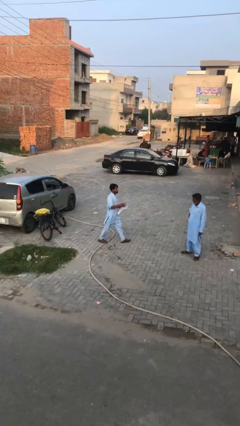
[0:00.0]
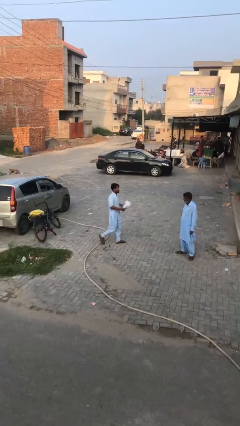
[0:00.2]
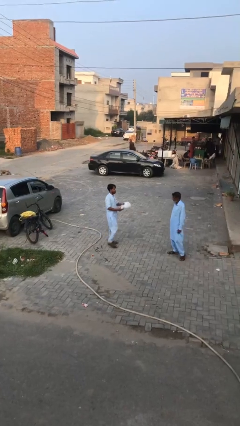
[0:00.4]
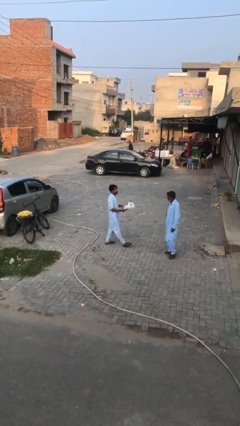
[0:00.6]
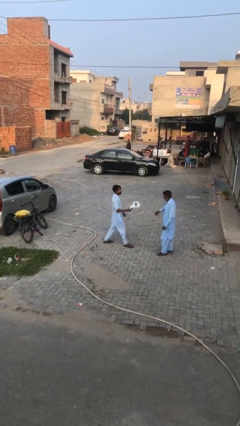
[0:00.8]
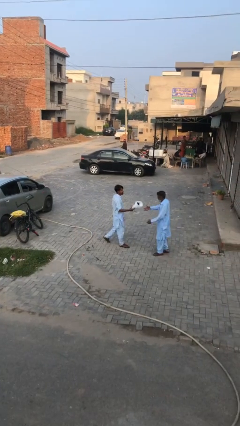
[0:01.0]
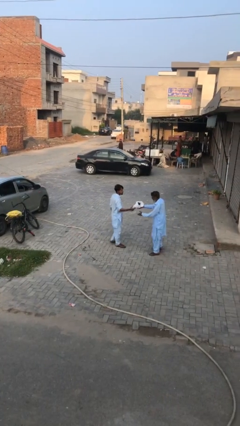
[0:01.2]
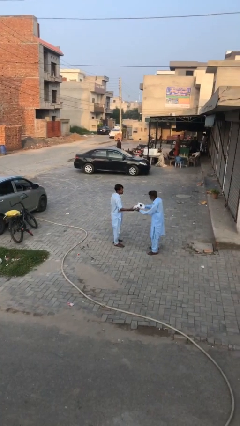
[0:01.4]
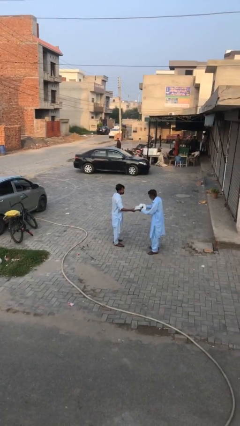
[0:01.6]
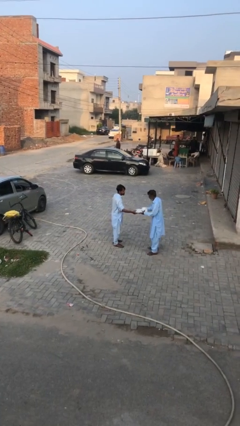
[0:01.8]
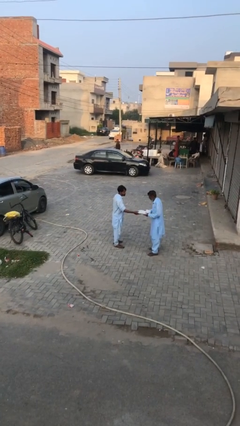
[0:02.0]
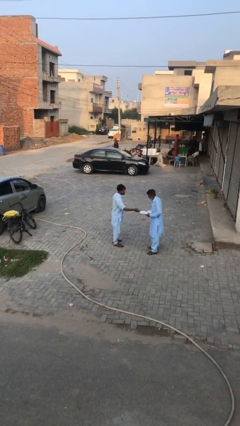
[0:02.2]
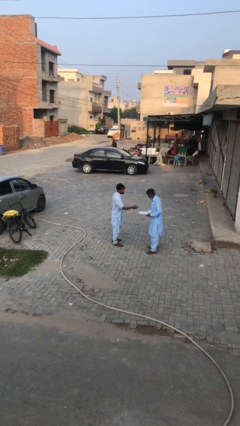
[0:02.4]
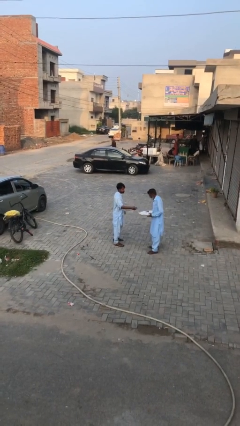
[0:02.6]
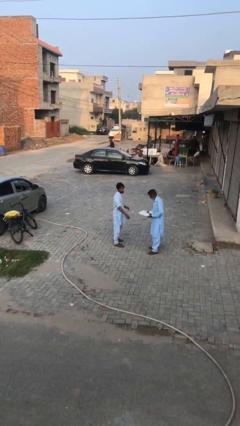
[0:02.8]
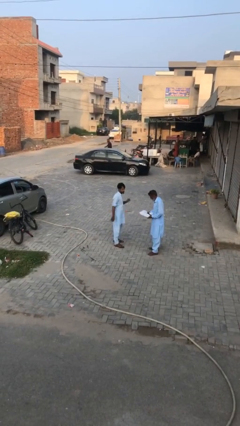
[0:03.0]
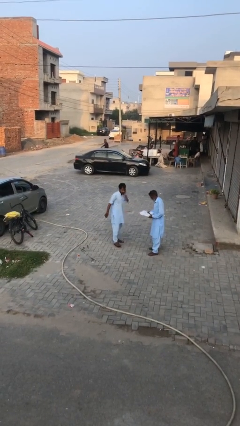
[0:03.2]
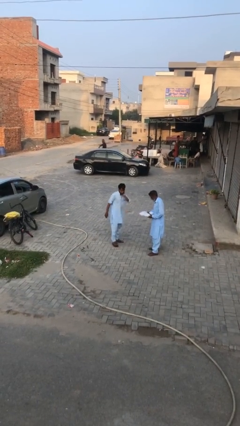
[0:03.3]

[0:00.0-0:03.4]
person transfers object to person

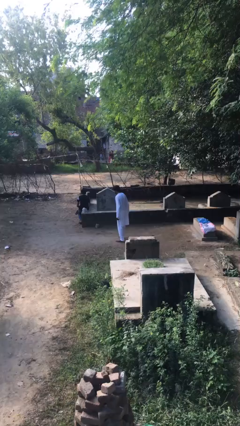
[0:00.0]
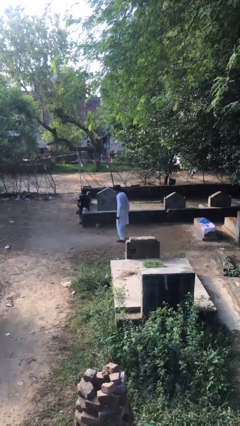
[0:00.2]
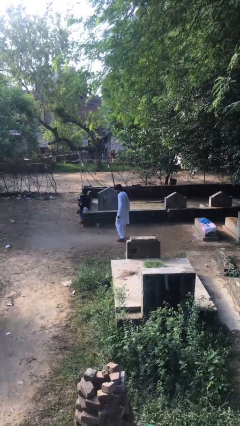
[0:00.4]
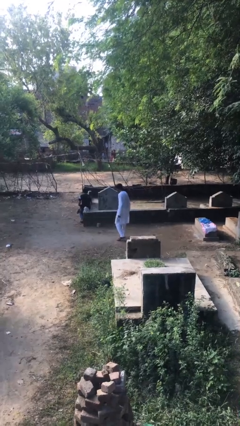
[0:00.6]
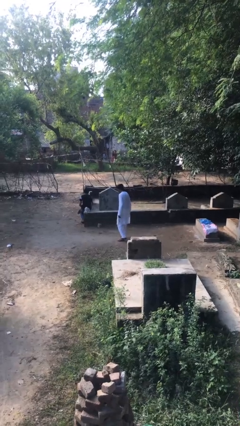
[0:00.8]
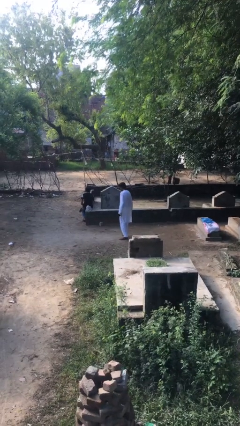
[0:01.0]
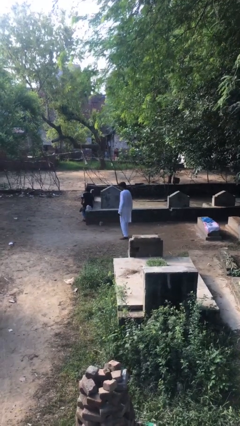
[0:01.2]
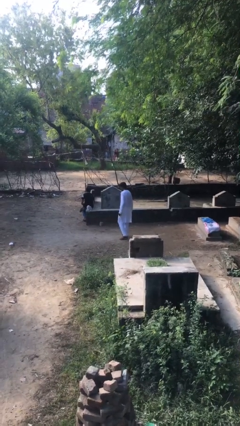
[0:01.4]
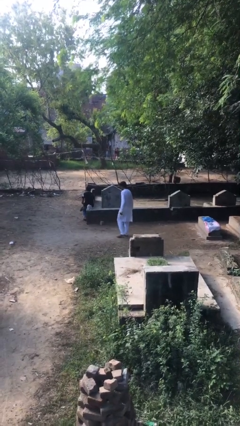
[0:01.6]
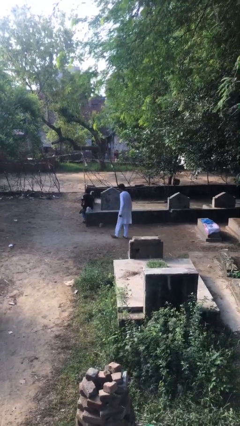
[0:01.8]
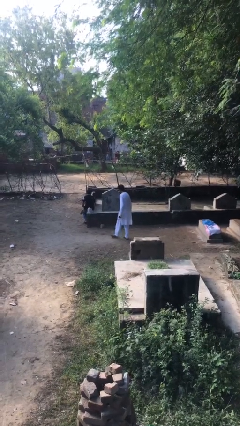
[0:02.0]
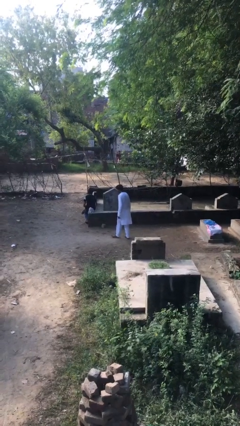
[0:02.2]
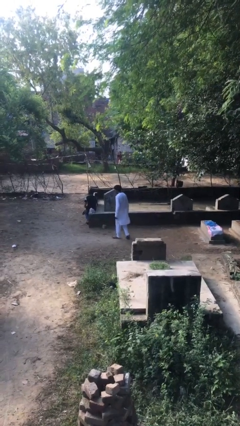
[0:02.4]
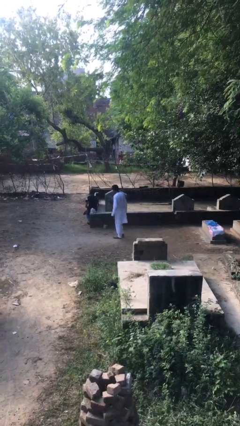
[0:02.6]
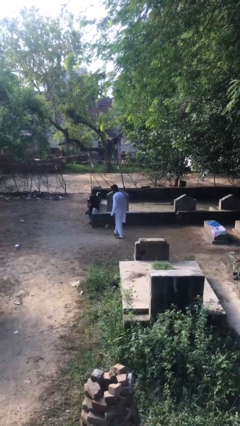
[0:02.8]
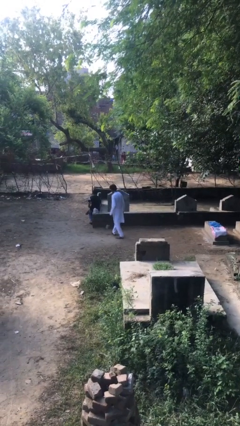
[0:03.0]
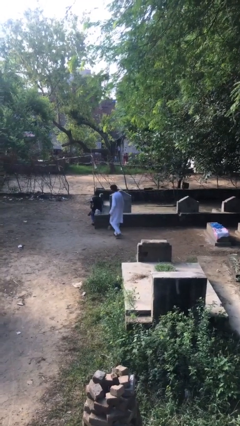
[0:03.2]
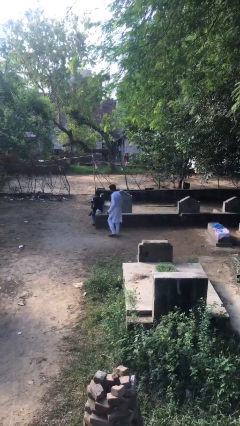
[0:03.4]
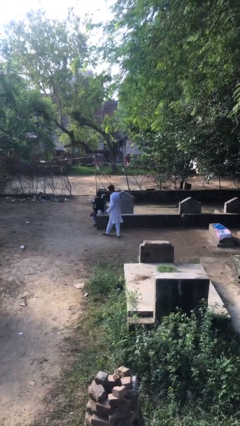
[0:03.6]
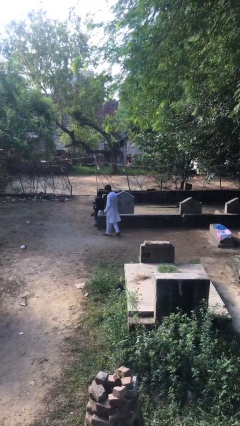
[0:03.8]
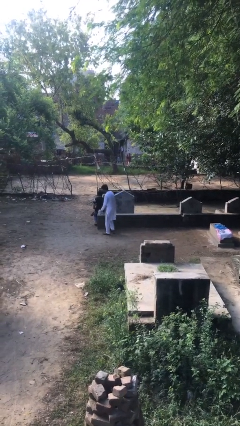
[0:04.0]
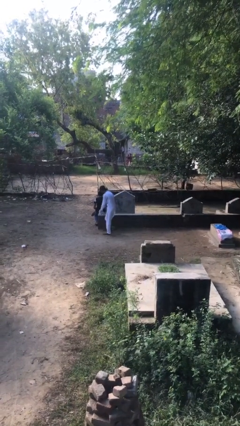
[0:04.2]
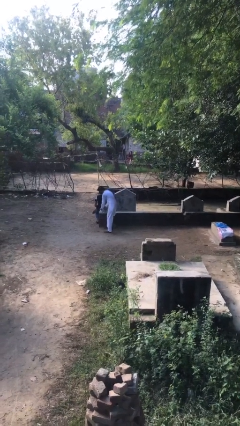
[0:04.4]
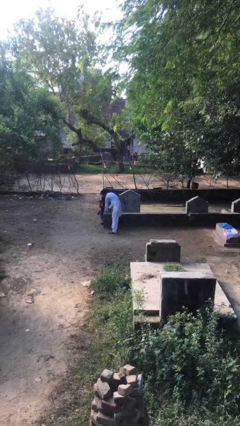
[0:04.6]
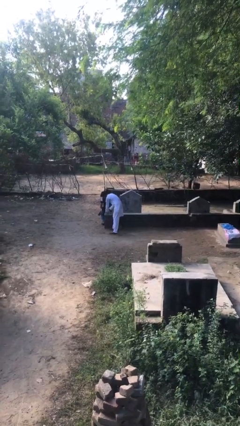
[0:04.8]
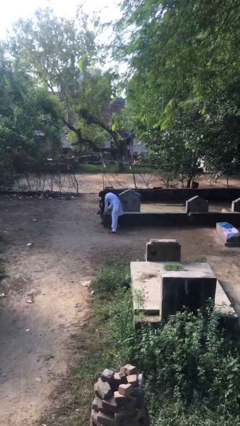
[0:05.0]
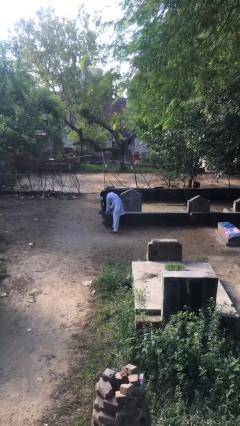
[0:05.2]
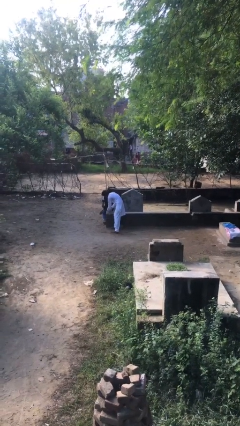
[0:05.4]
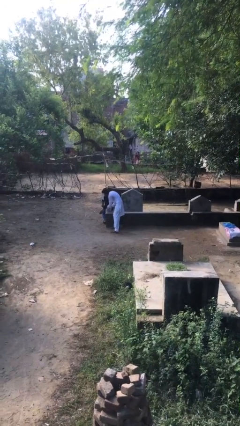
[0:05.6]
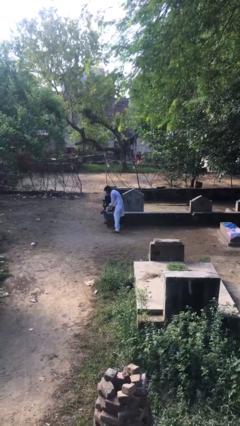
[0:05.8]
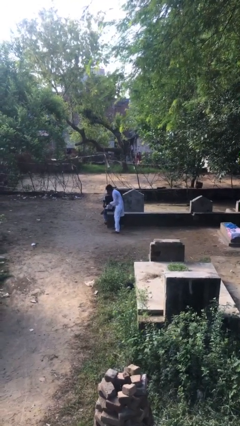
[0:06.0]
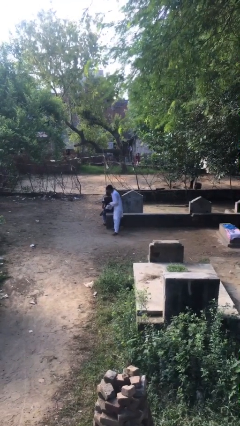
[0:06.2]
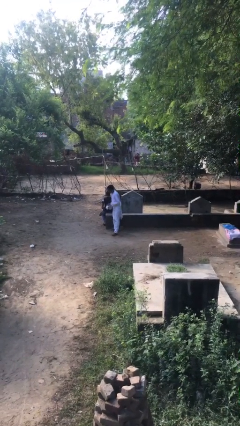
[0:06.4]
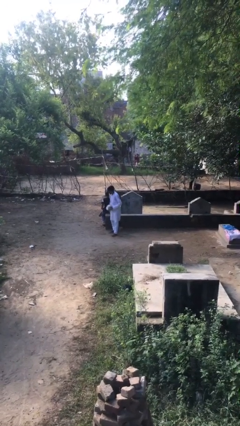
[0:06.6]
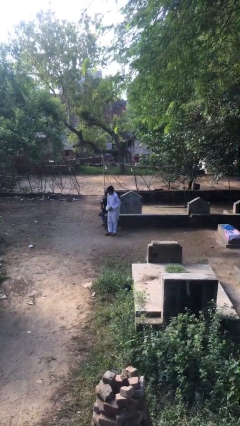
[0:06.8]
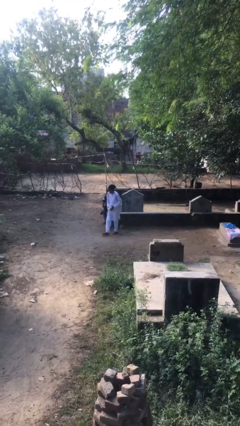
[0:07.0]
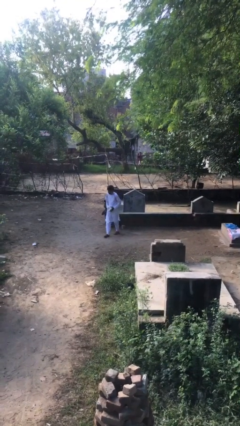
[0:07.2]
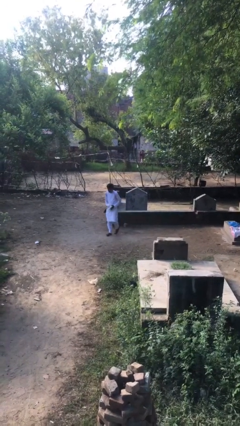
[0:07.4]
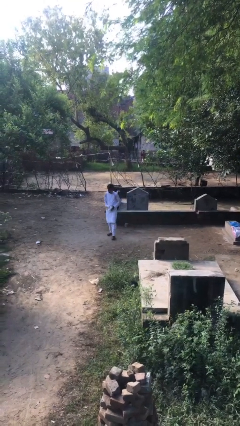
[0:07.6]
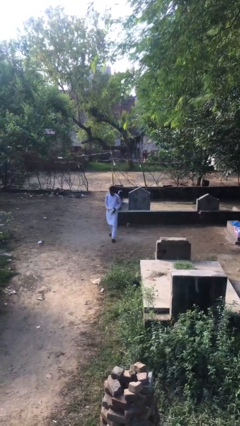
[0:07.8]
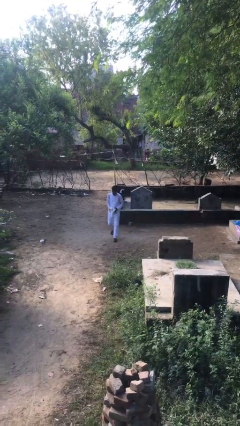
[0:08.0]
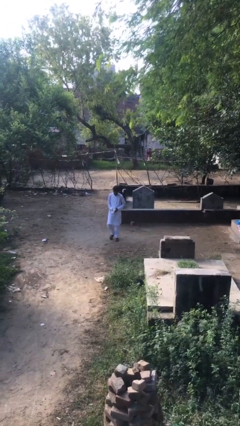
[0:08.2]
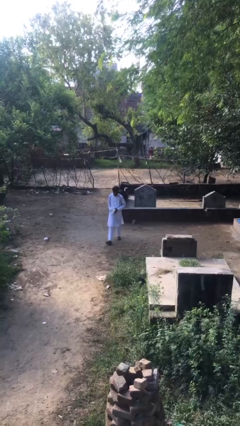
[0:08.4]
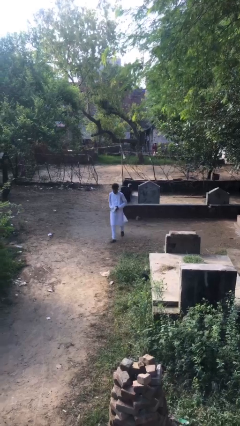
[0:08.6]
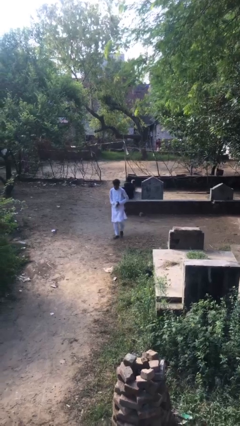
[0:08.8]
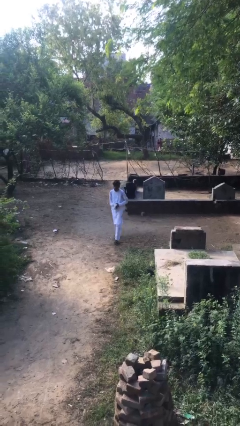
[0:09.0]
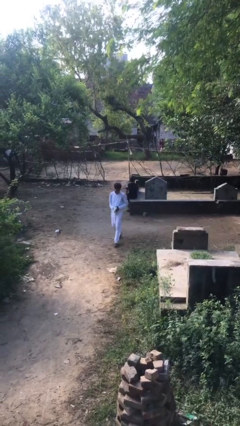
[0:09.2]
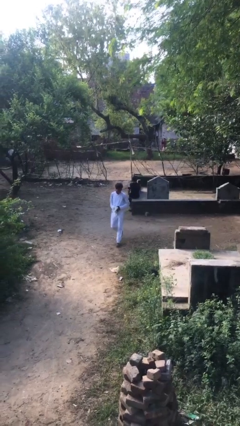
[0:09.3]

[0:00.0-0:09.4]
person steals object from person

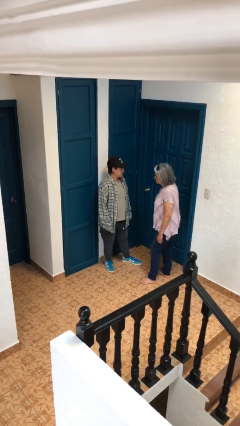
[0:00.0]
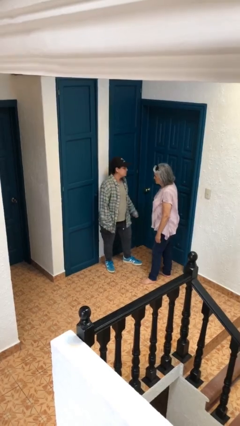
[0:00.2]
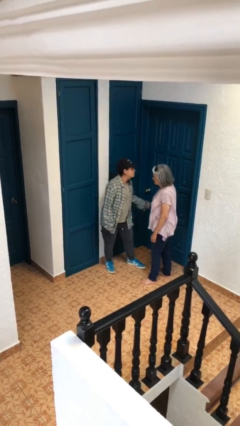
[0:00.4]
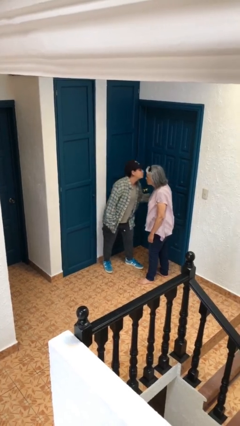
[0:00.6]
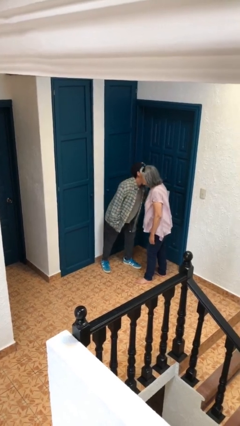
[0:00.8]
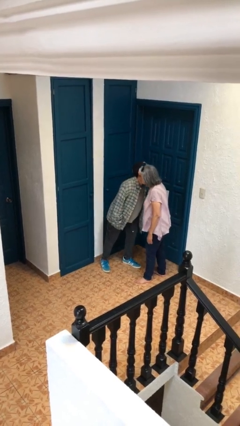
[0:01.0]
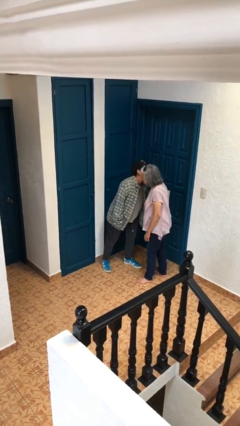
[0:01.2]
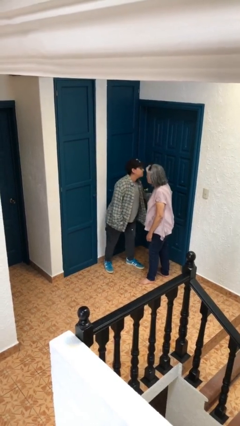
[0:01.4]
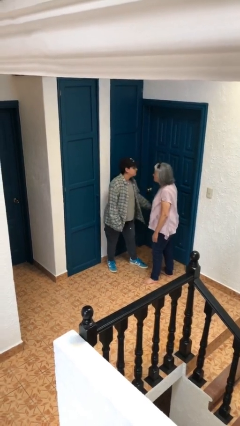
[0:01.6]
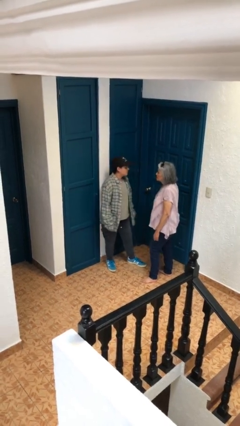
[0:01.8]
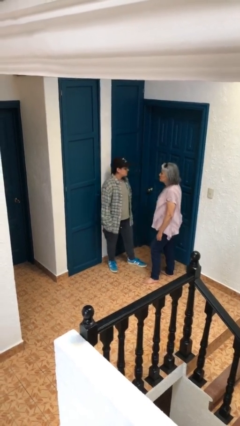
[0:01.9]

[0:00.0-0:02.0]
person kisses cheek of person

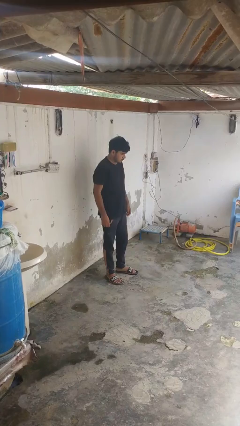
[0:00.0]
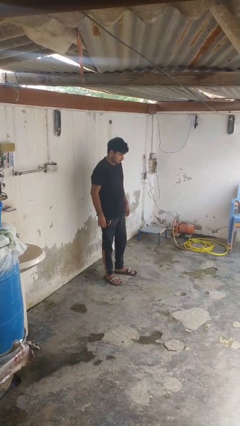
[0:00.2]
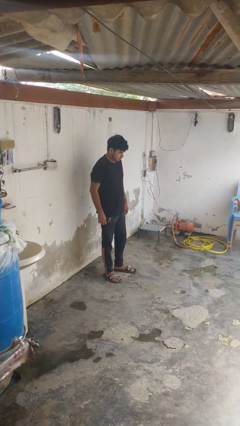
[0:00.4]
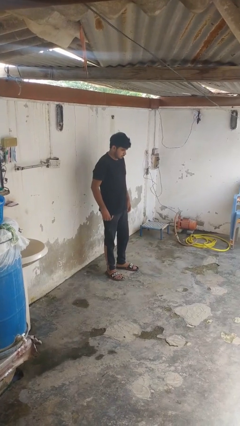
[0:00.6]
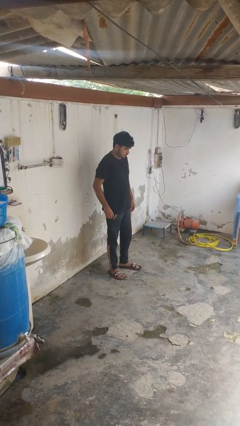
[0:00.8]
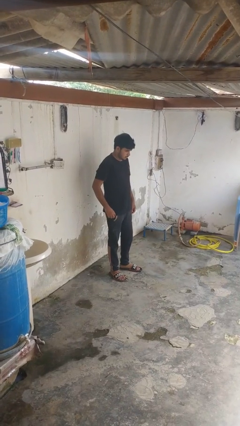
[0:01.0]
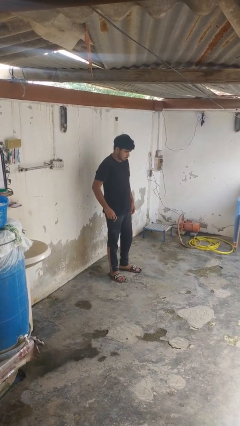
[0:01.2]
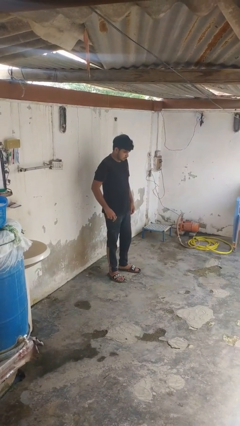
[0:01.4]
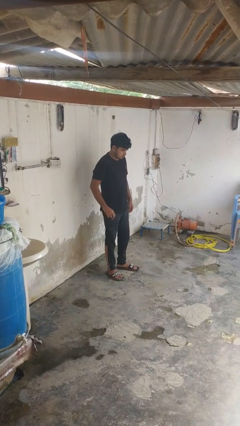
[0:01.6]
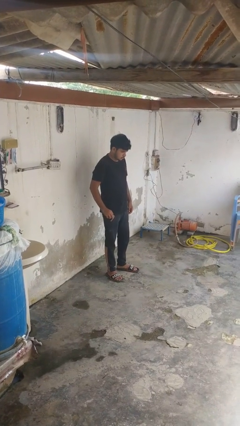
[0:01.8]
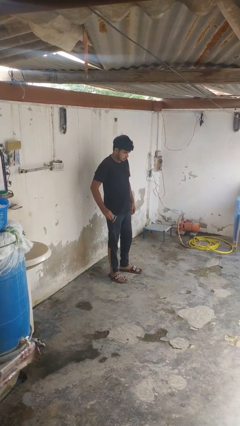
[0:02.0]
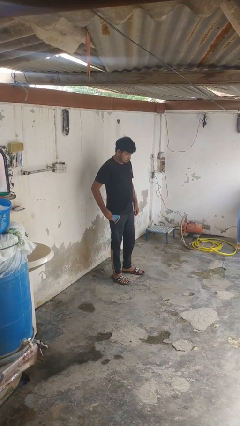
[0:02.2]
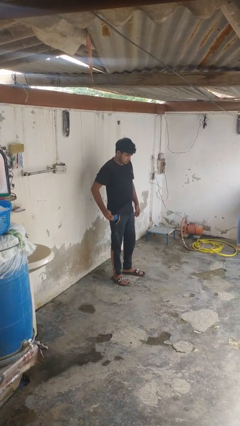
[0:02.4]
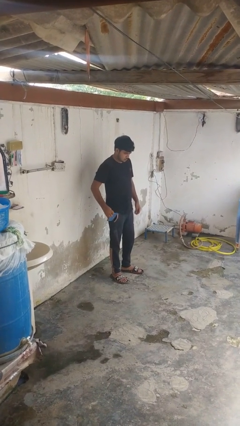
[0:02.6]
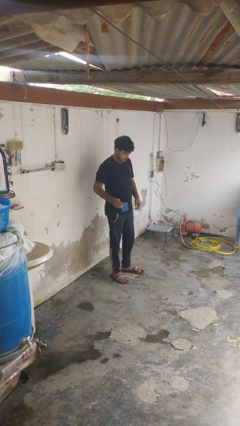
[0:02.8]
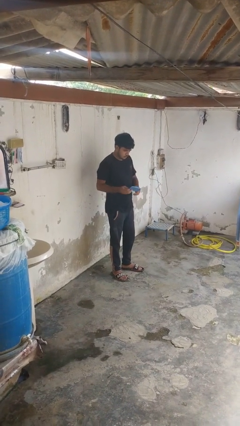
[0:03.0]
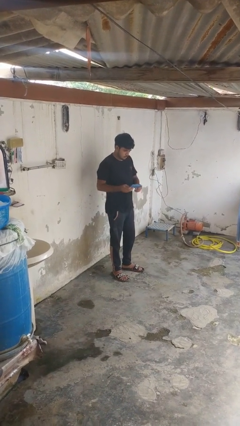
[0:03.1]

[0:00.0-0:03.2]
person takes phone from pocket
